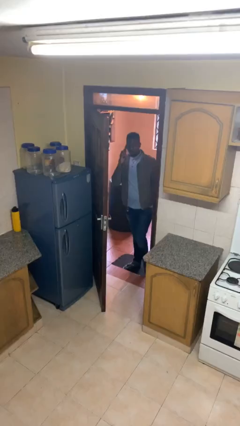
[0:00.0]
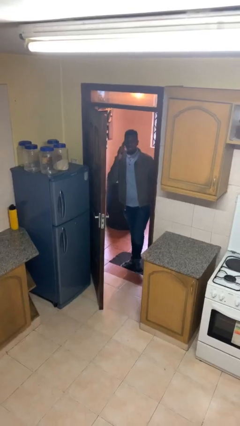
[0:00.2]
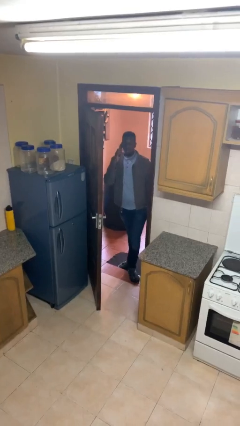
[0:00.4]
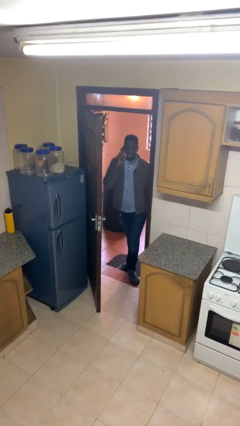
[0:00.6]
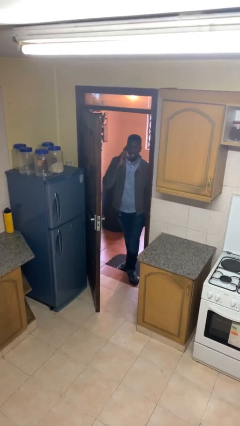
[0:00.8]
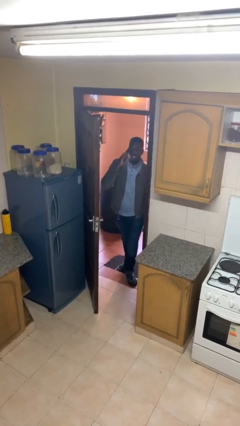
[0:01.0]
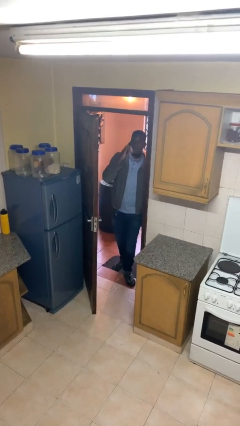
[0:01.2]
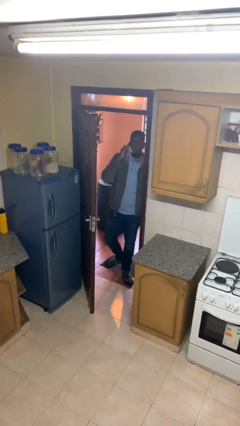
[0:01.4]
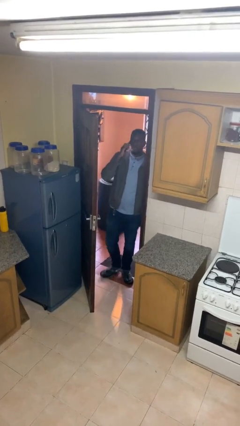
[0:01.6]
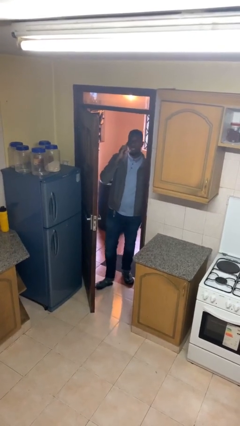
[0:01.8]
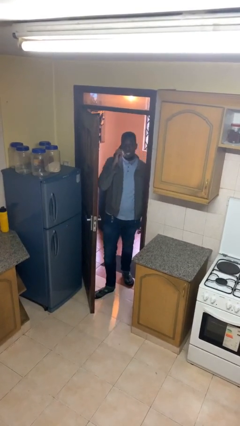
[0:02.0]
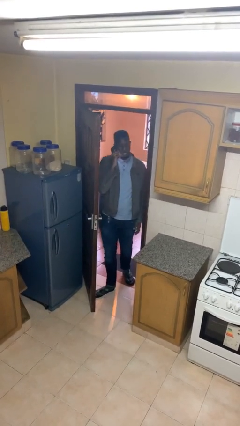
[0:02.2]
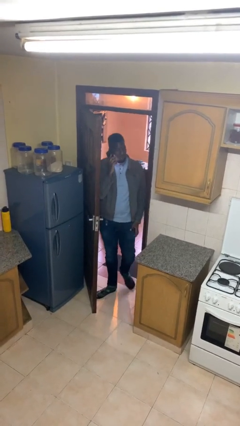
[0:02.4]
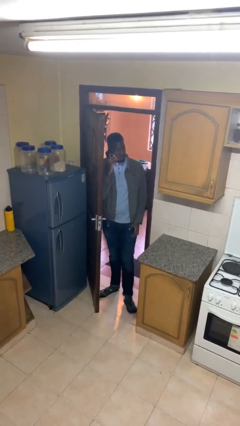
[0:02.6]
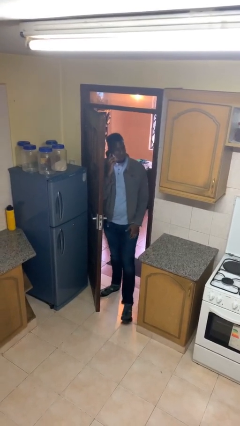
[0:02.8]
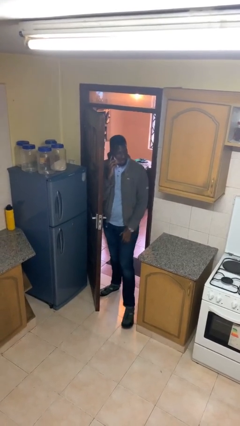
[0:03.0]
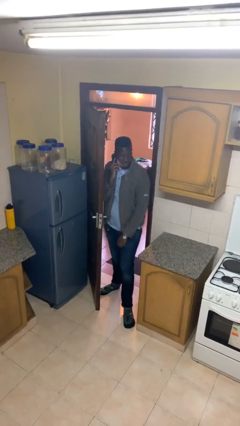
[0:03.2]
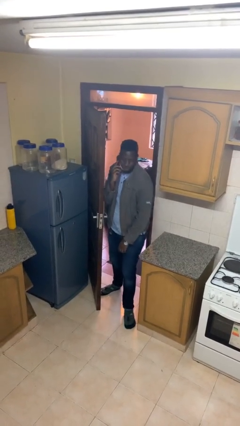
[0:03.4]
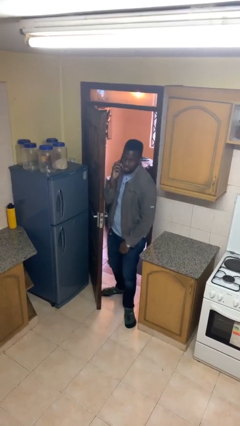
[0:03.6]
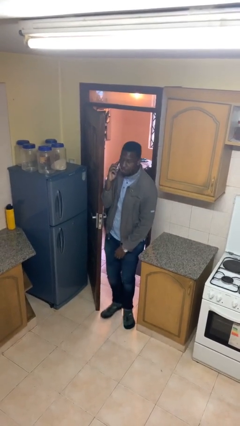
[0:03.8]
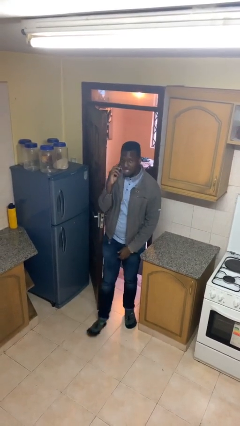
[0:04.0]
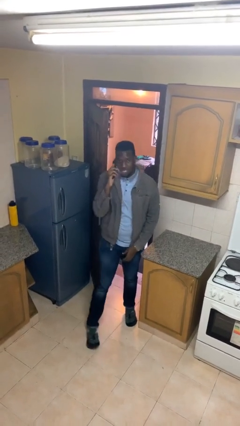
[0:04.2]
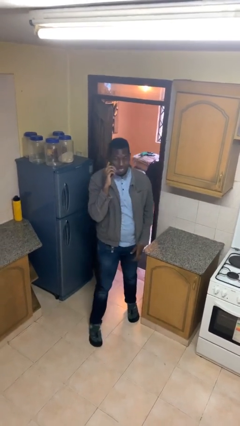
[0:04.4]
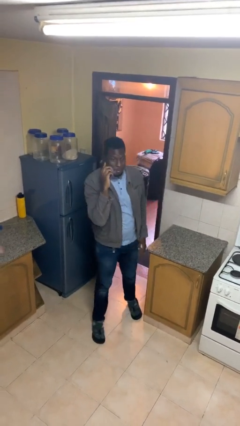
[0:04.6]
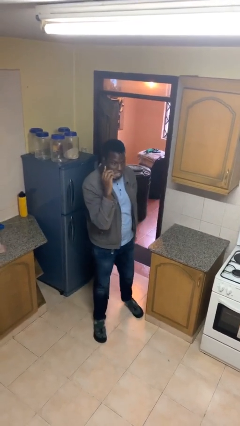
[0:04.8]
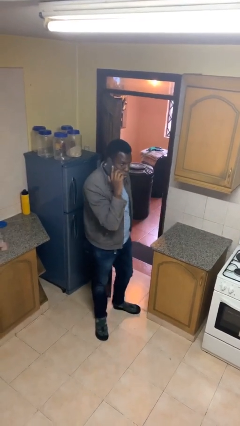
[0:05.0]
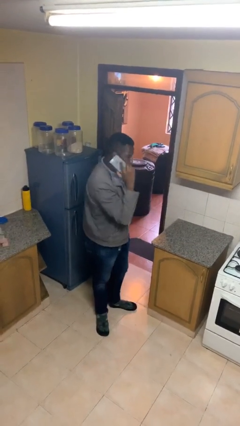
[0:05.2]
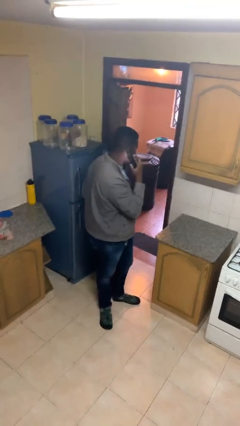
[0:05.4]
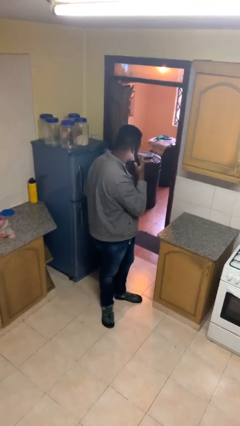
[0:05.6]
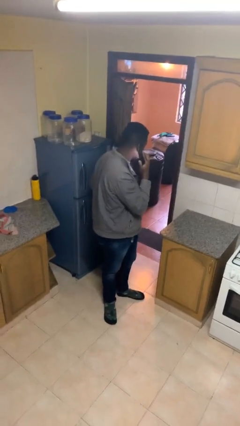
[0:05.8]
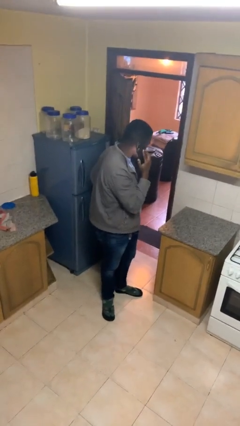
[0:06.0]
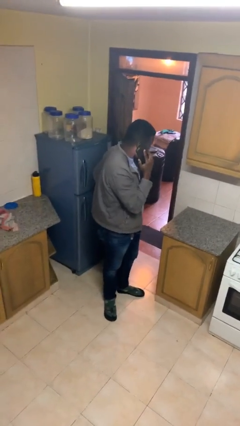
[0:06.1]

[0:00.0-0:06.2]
person enters scene through structure

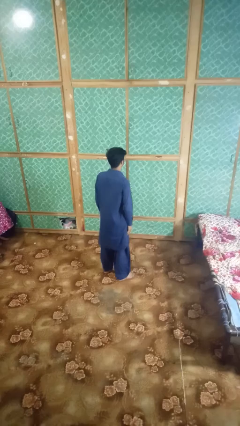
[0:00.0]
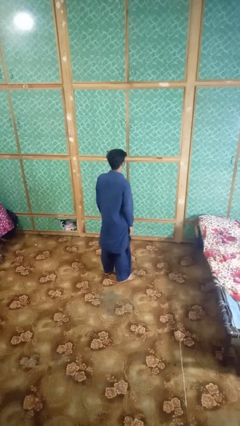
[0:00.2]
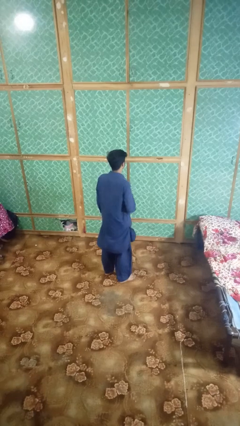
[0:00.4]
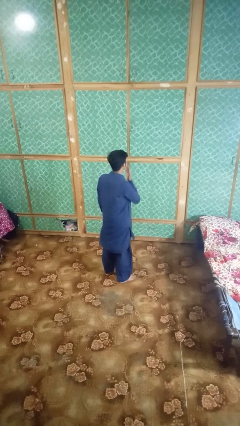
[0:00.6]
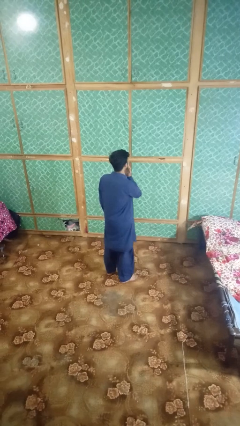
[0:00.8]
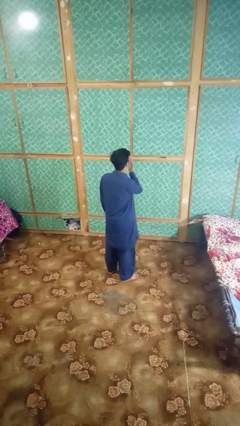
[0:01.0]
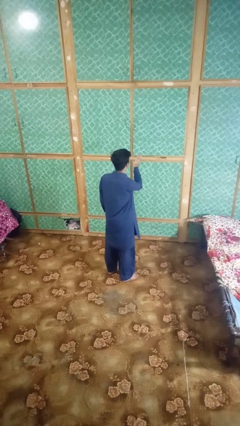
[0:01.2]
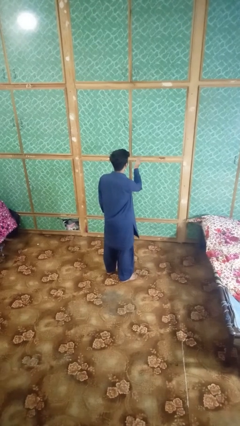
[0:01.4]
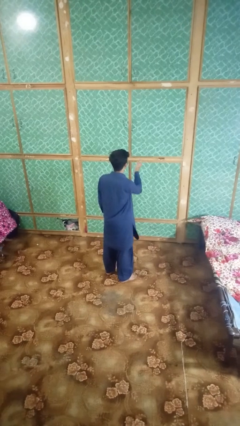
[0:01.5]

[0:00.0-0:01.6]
person gestures blow kiss

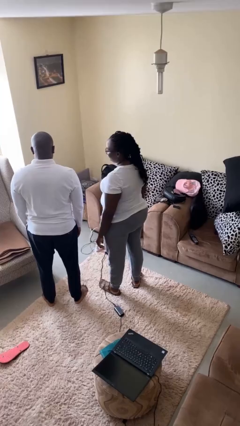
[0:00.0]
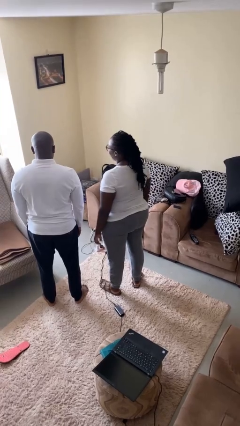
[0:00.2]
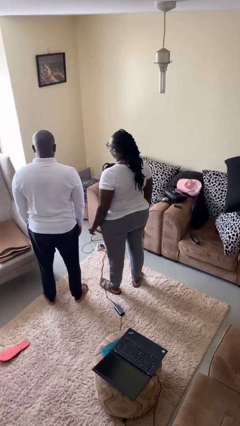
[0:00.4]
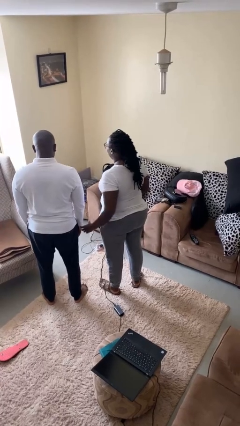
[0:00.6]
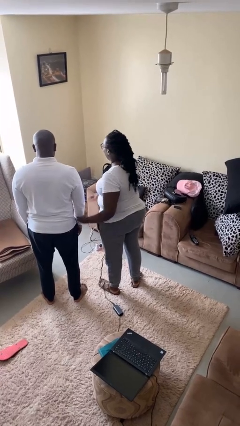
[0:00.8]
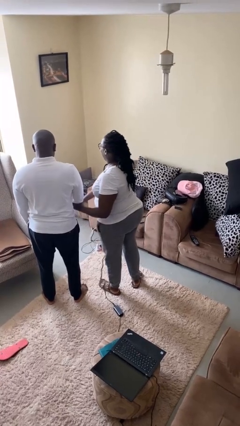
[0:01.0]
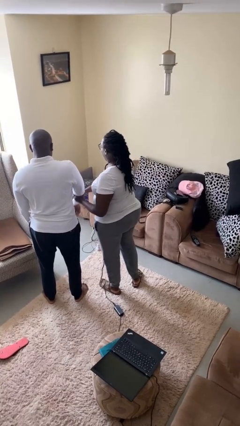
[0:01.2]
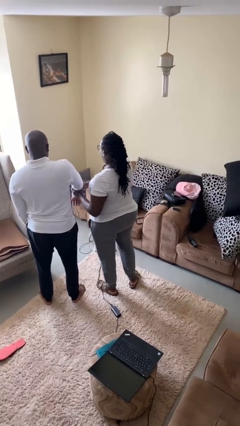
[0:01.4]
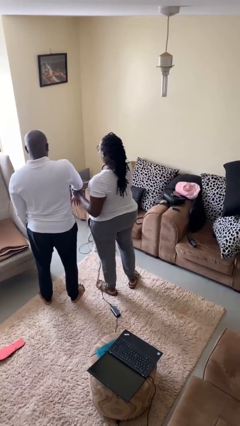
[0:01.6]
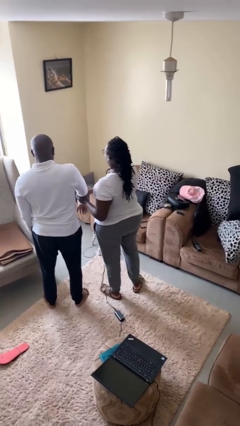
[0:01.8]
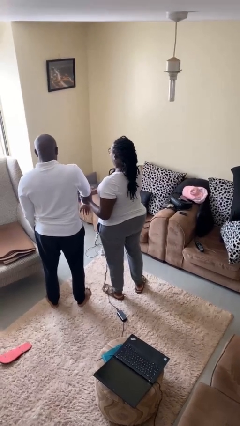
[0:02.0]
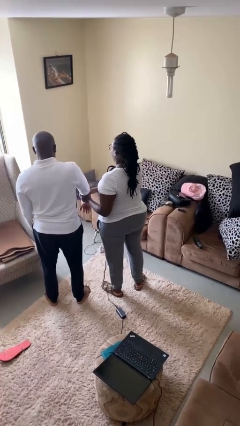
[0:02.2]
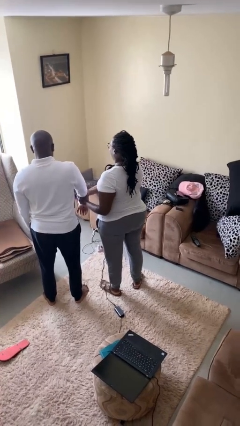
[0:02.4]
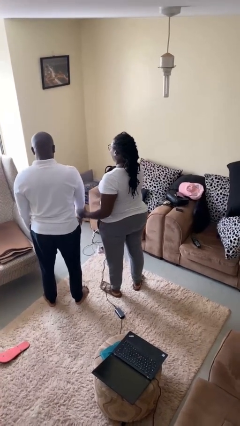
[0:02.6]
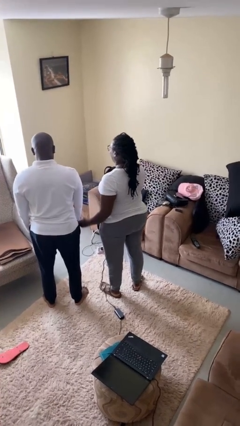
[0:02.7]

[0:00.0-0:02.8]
person grabs person by forearm

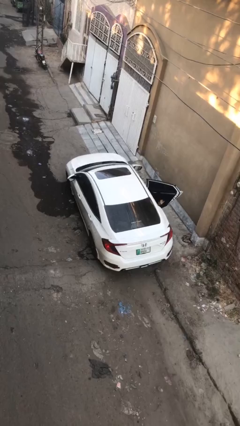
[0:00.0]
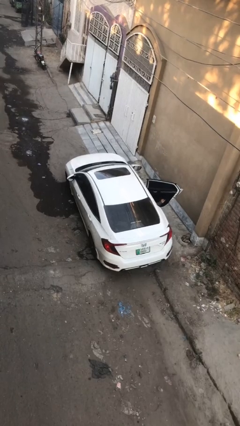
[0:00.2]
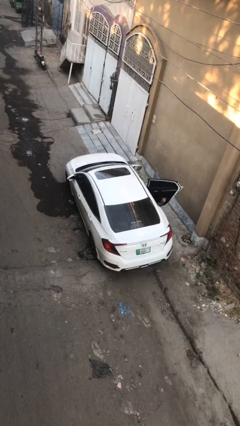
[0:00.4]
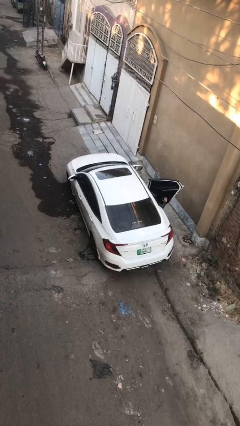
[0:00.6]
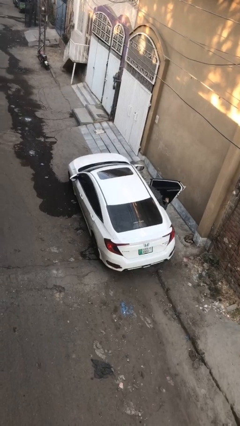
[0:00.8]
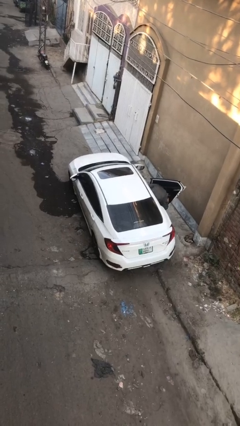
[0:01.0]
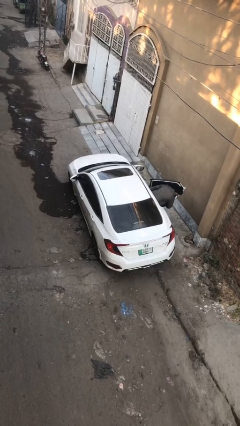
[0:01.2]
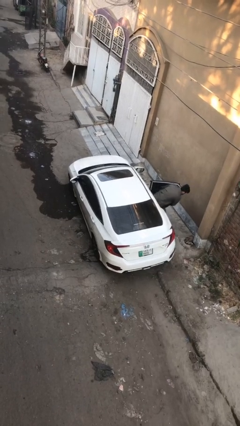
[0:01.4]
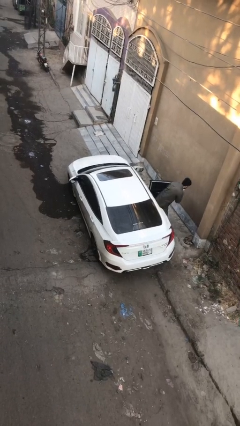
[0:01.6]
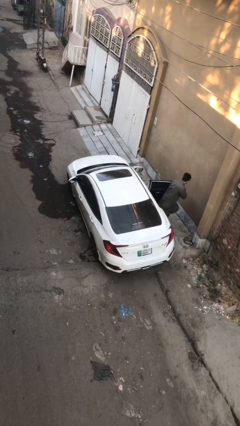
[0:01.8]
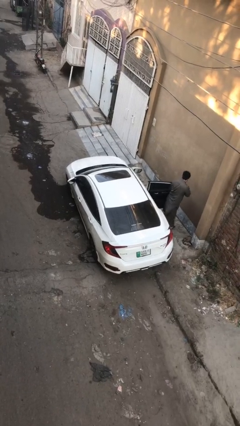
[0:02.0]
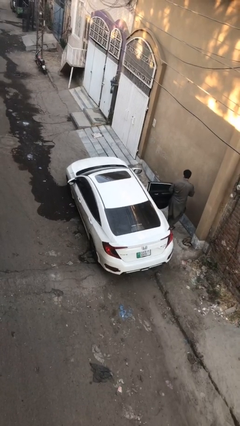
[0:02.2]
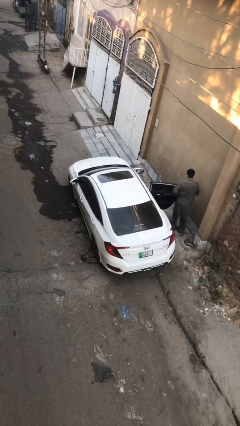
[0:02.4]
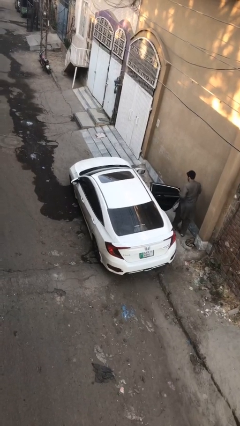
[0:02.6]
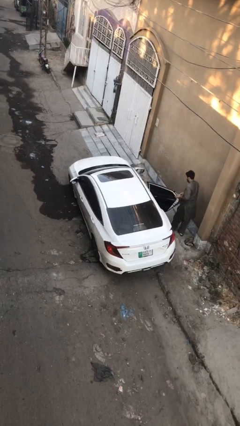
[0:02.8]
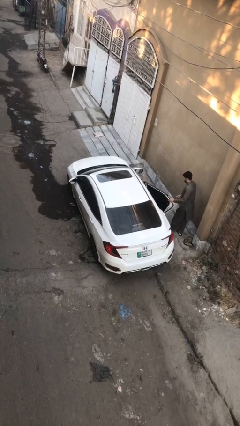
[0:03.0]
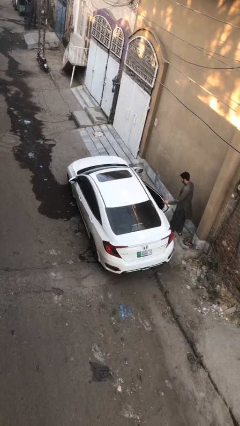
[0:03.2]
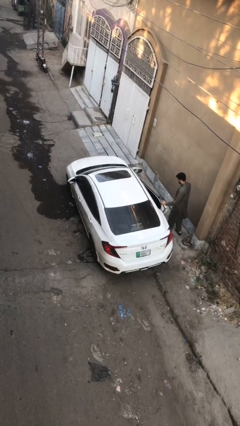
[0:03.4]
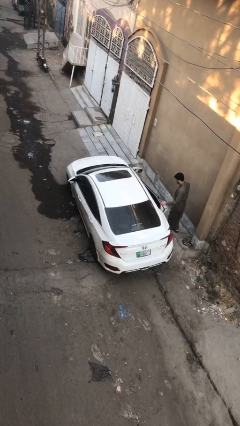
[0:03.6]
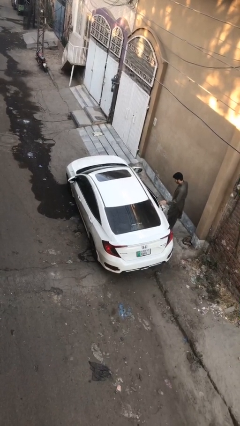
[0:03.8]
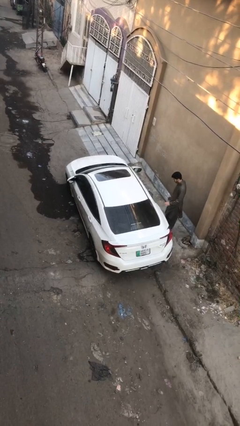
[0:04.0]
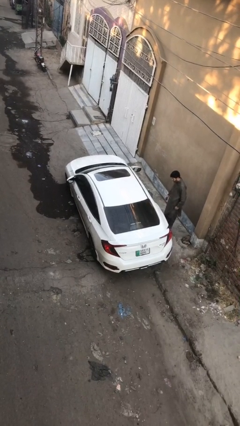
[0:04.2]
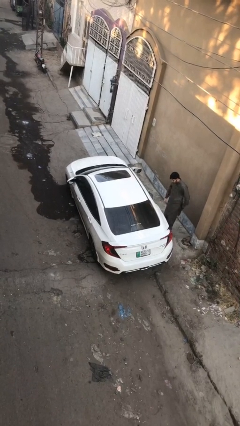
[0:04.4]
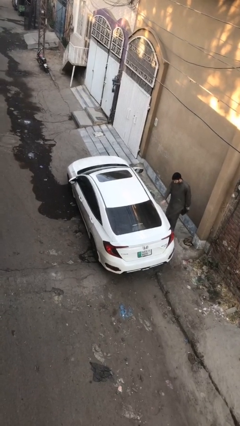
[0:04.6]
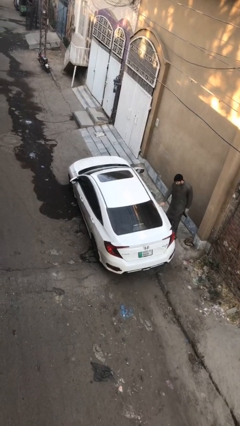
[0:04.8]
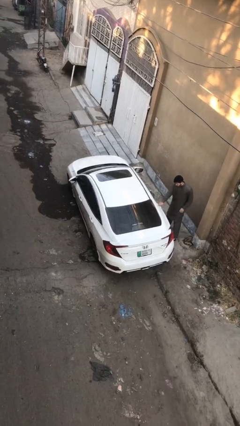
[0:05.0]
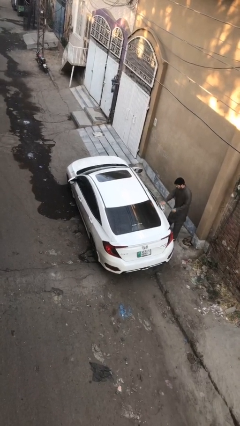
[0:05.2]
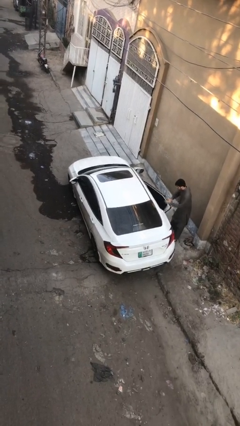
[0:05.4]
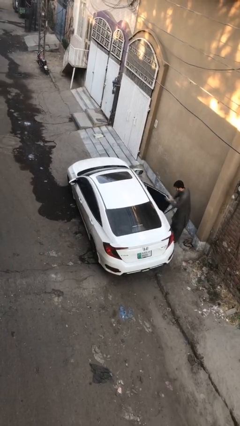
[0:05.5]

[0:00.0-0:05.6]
car drops off person

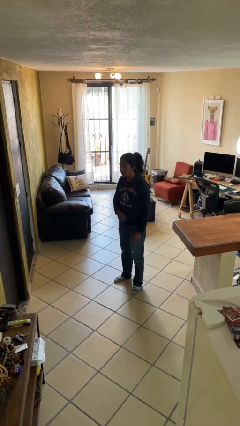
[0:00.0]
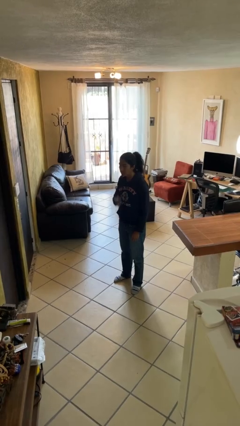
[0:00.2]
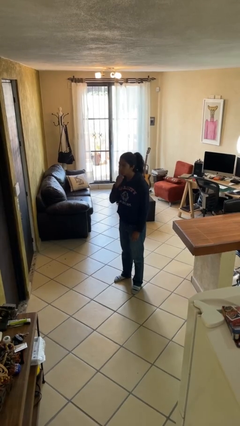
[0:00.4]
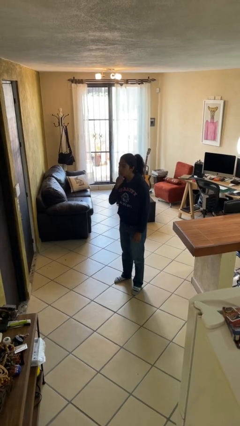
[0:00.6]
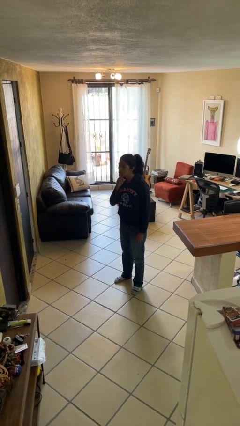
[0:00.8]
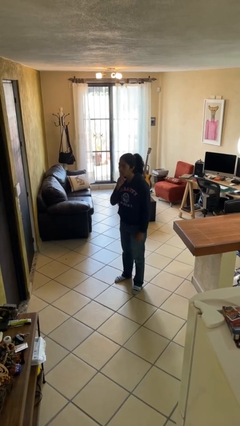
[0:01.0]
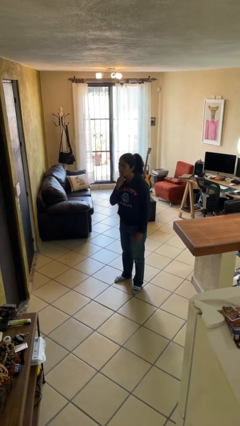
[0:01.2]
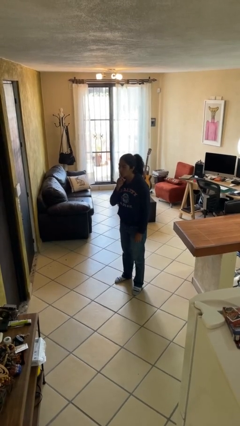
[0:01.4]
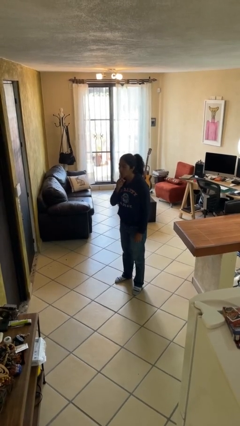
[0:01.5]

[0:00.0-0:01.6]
person gestures be quiet
